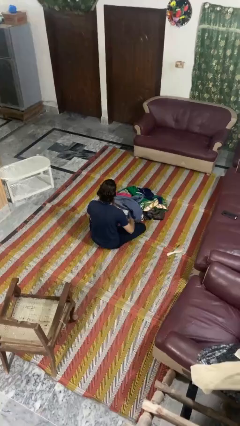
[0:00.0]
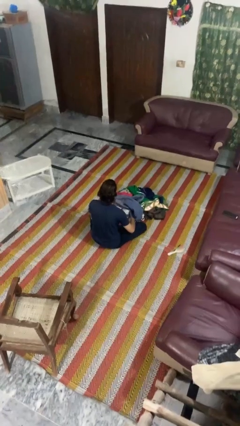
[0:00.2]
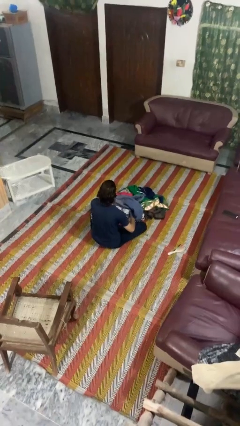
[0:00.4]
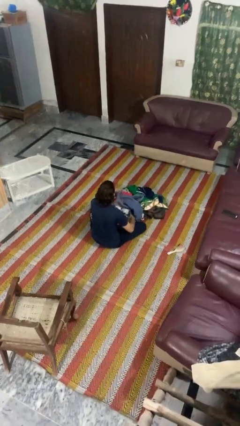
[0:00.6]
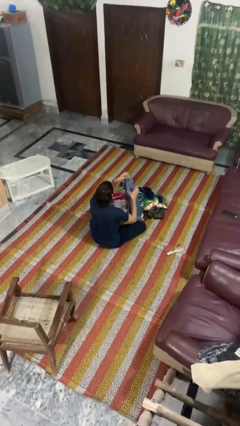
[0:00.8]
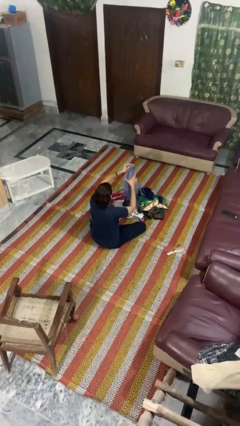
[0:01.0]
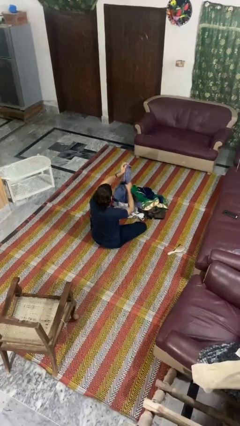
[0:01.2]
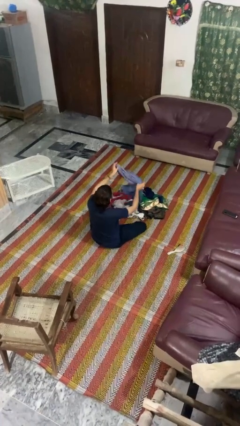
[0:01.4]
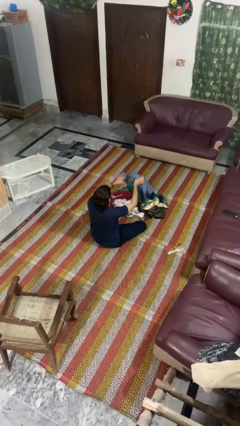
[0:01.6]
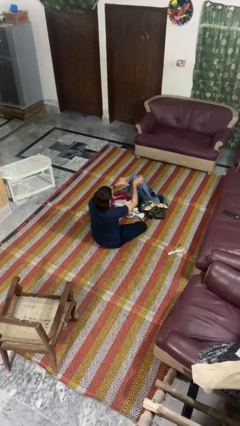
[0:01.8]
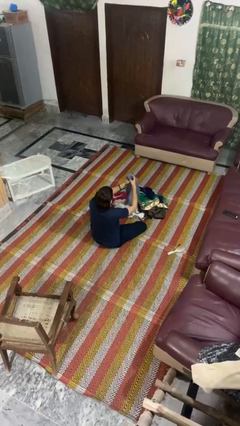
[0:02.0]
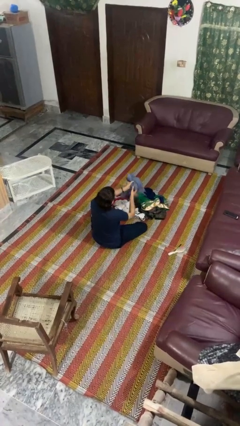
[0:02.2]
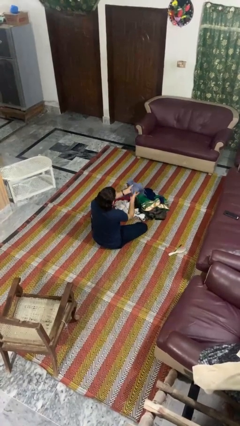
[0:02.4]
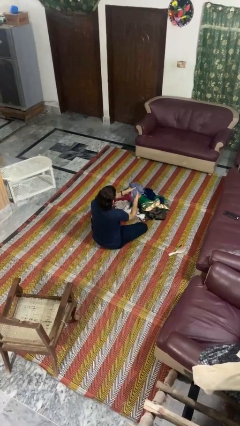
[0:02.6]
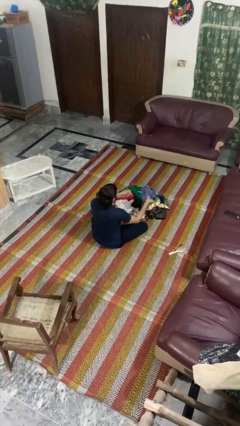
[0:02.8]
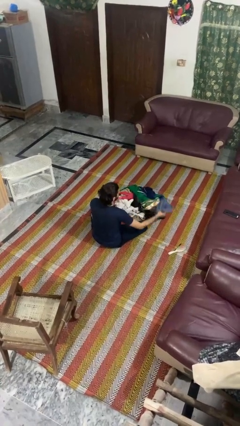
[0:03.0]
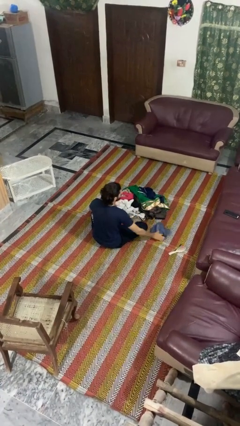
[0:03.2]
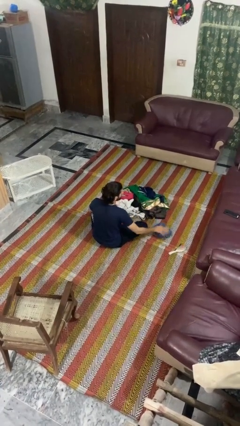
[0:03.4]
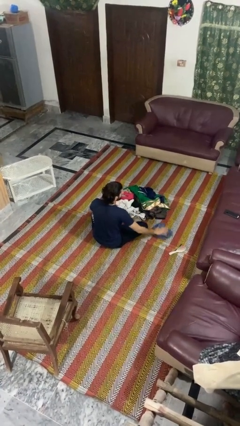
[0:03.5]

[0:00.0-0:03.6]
person folds pants

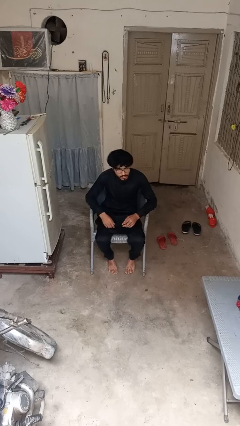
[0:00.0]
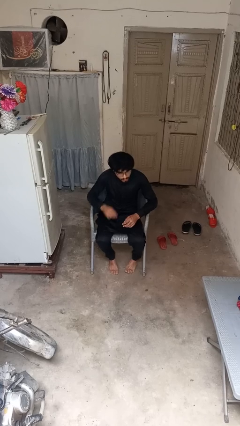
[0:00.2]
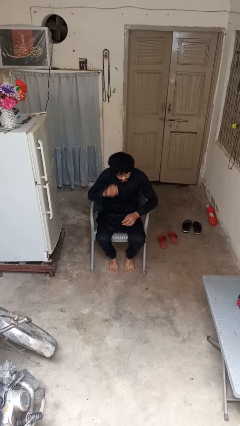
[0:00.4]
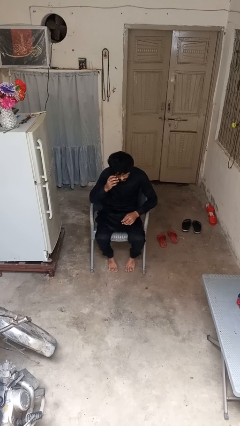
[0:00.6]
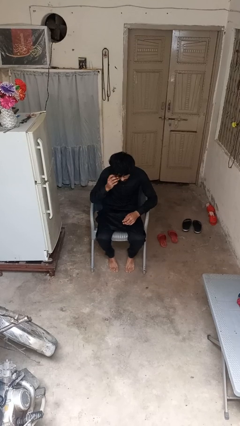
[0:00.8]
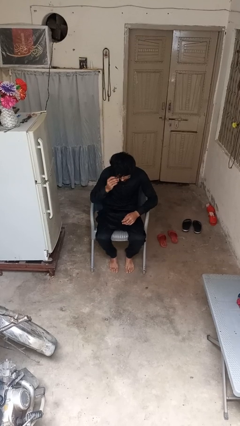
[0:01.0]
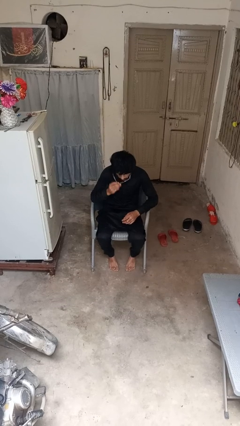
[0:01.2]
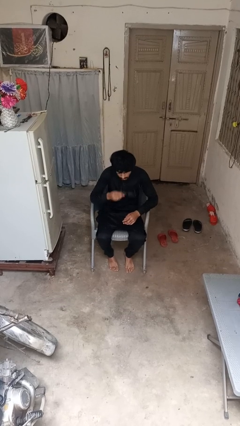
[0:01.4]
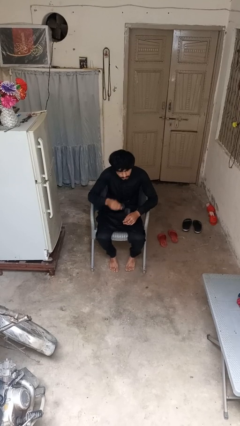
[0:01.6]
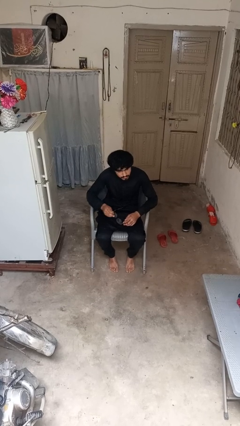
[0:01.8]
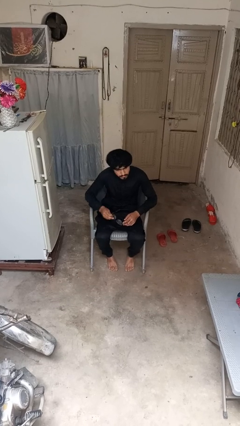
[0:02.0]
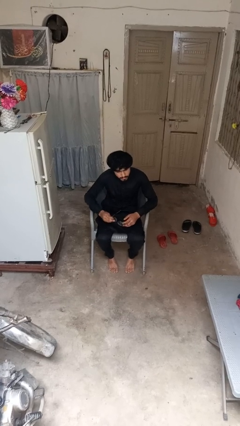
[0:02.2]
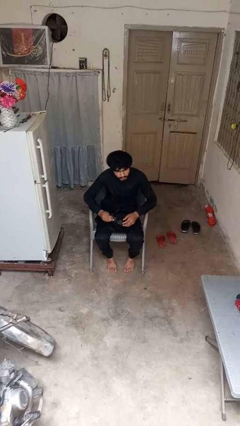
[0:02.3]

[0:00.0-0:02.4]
person takes off glasses

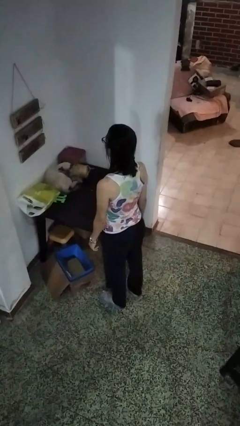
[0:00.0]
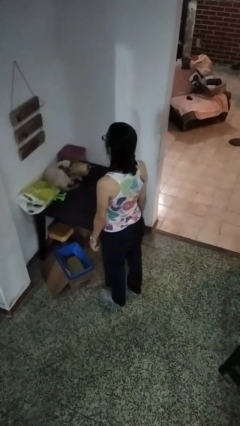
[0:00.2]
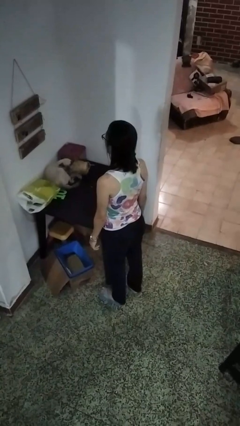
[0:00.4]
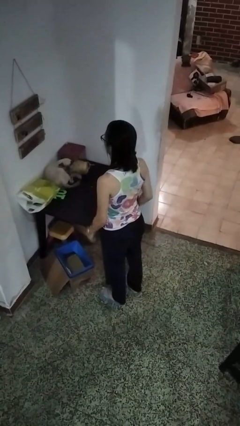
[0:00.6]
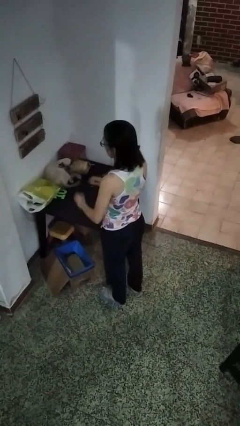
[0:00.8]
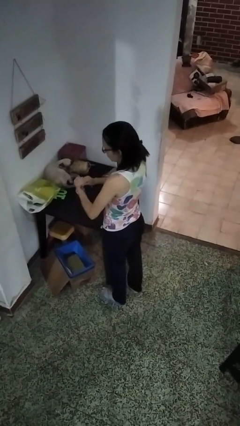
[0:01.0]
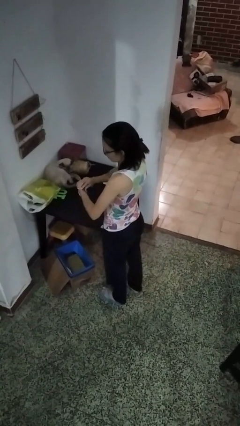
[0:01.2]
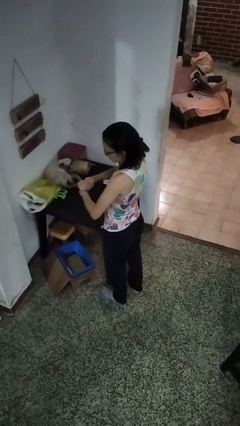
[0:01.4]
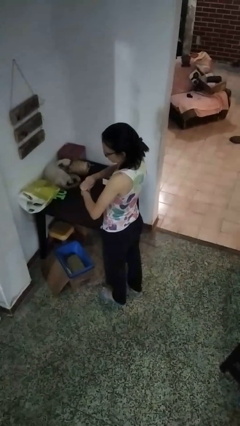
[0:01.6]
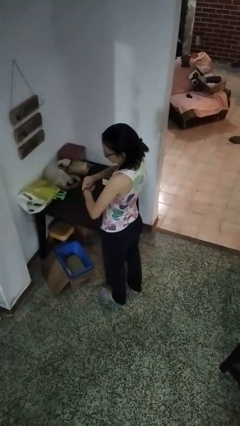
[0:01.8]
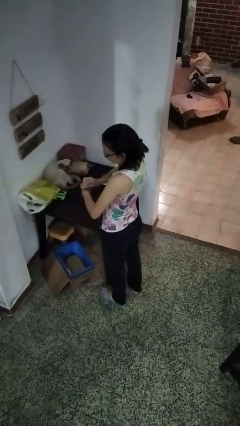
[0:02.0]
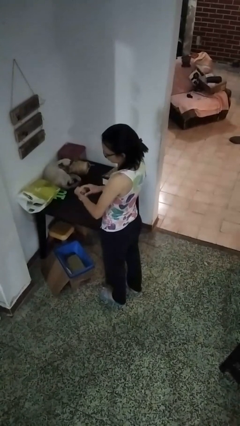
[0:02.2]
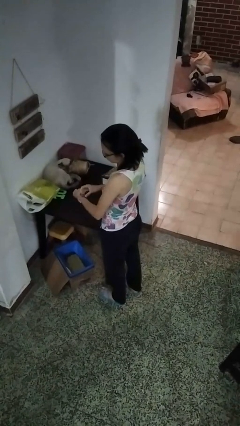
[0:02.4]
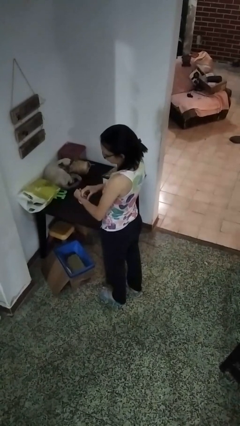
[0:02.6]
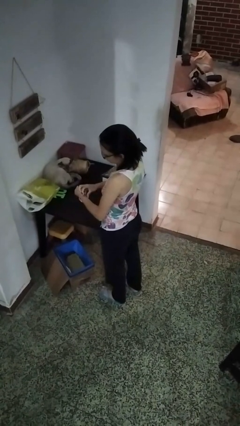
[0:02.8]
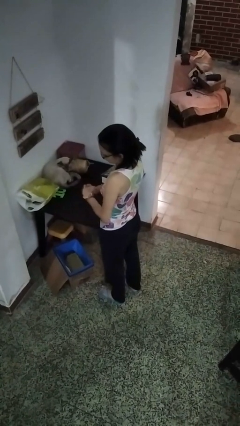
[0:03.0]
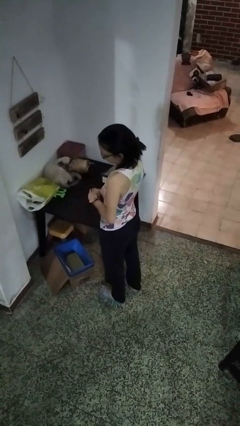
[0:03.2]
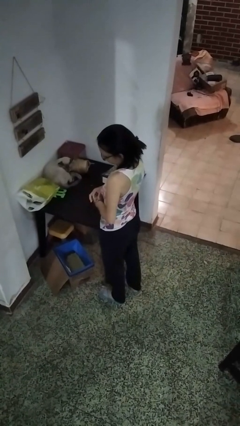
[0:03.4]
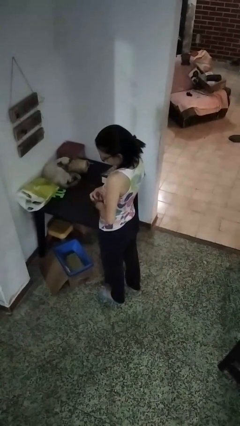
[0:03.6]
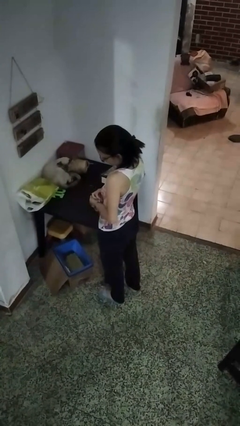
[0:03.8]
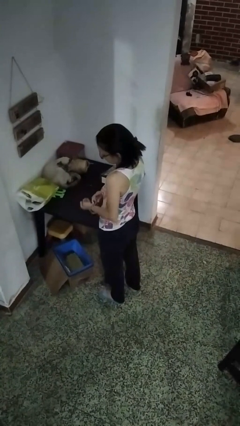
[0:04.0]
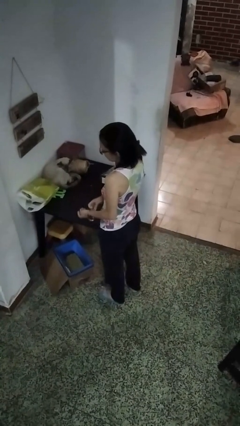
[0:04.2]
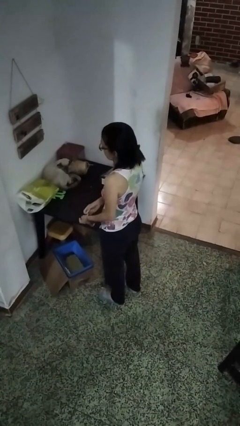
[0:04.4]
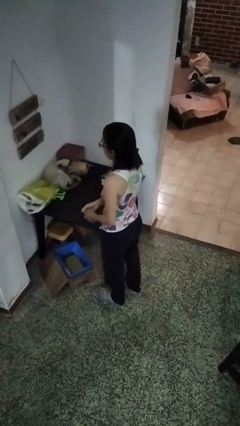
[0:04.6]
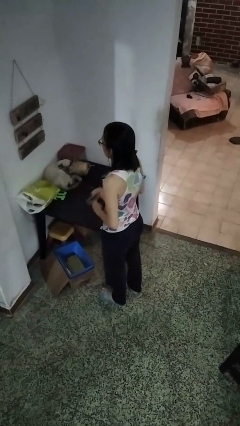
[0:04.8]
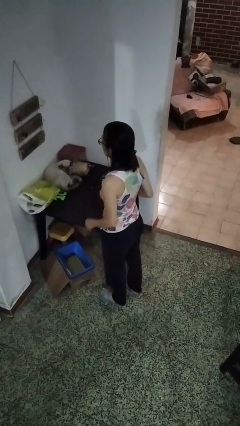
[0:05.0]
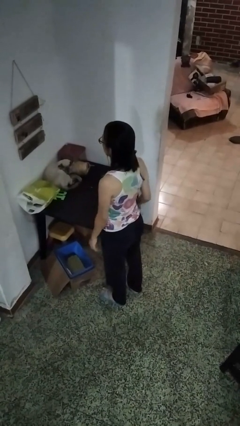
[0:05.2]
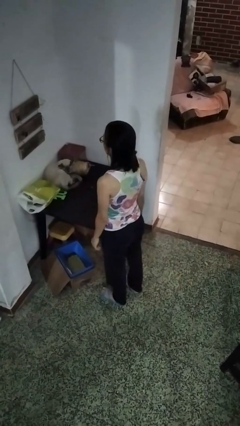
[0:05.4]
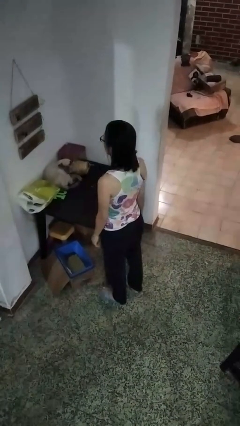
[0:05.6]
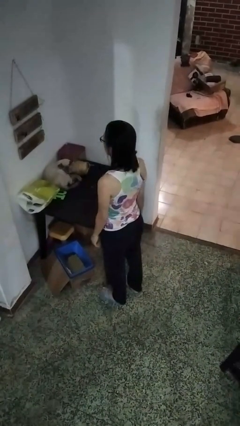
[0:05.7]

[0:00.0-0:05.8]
person takes off wristwatch

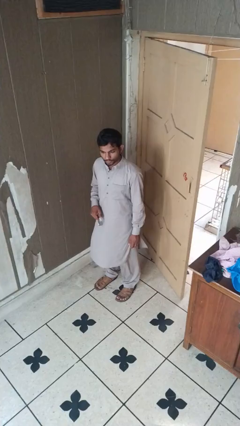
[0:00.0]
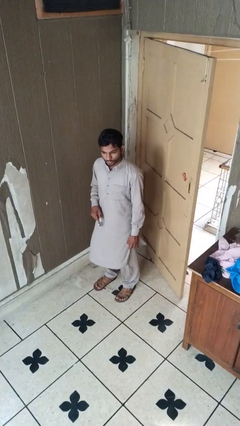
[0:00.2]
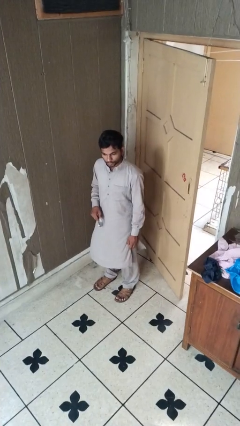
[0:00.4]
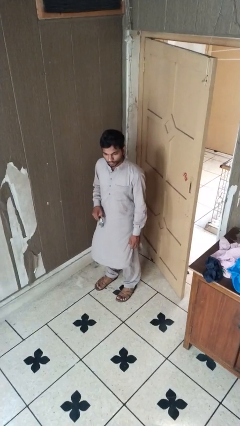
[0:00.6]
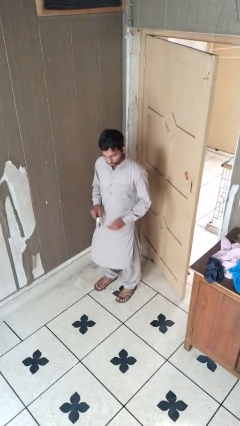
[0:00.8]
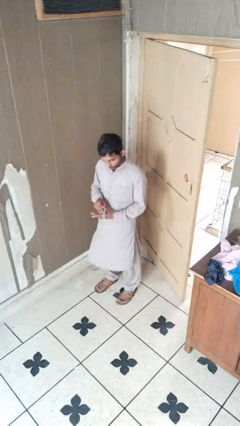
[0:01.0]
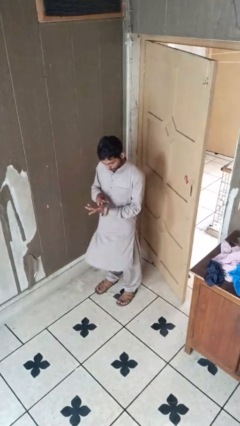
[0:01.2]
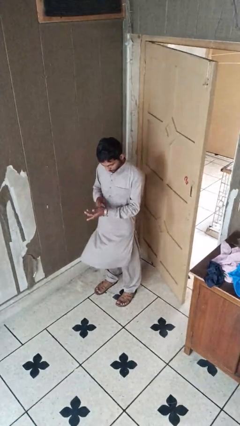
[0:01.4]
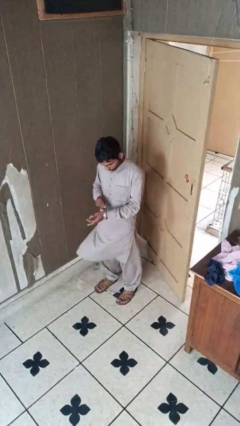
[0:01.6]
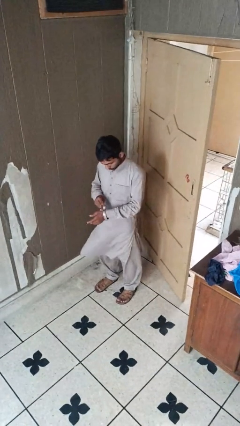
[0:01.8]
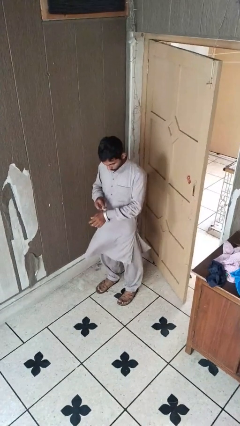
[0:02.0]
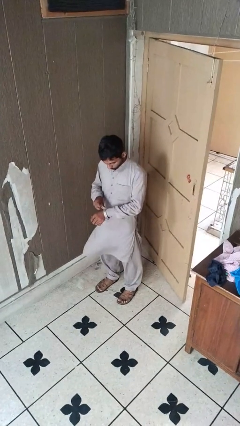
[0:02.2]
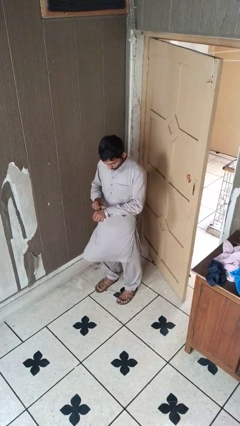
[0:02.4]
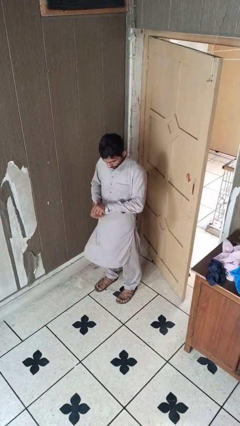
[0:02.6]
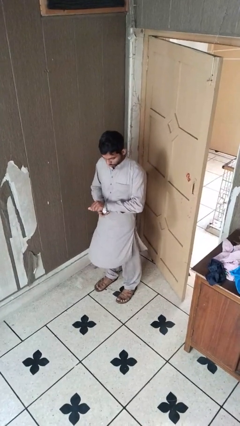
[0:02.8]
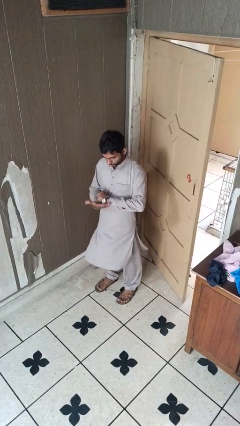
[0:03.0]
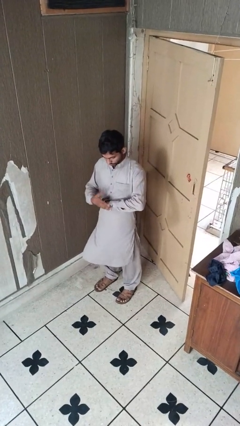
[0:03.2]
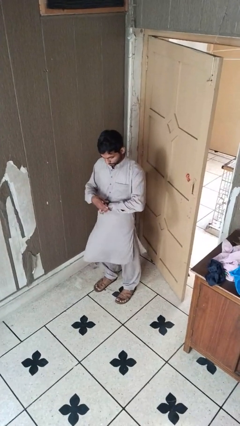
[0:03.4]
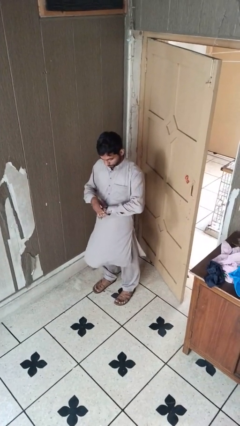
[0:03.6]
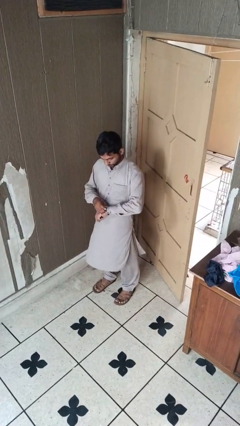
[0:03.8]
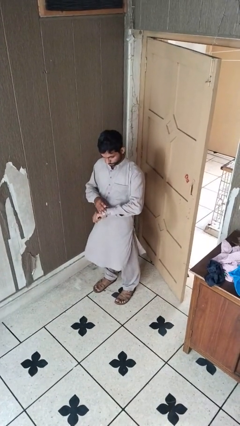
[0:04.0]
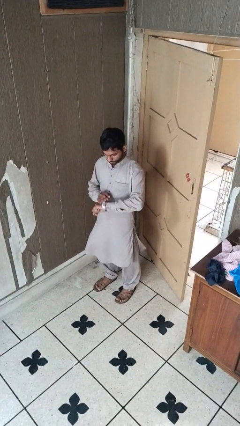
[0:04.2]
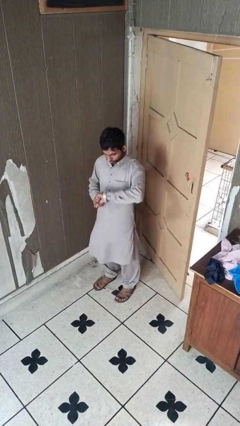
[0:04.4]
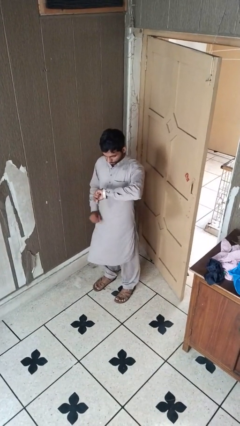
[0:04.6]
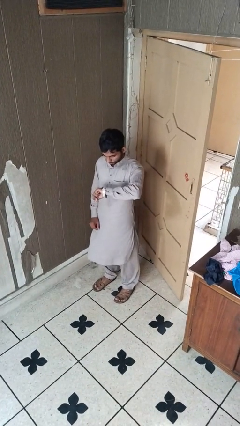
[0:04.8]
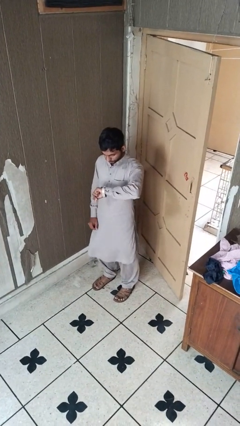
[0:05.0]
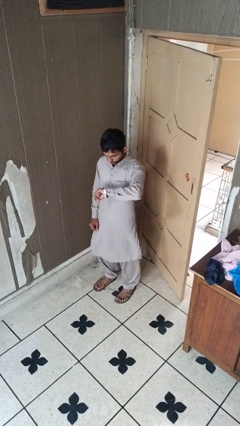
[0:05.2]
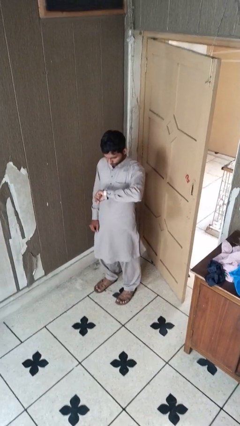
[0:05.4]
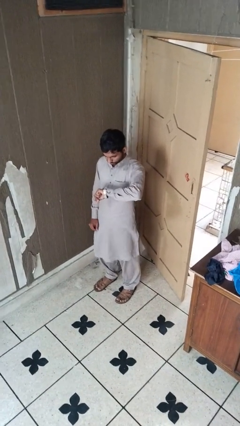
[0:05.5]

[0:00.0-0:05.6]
person puts on wristwatch

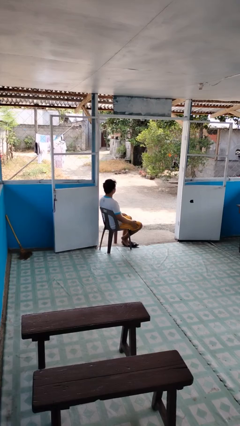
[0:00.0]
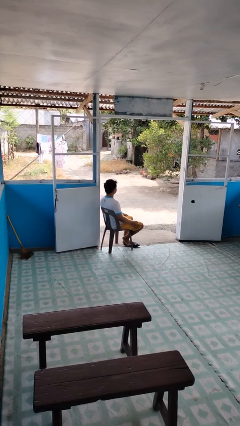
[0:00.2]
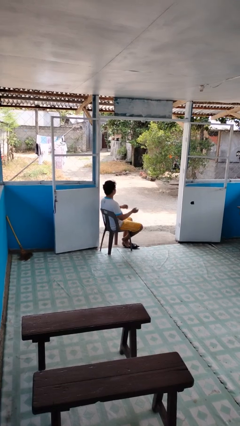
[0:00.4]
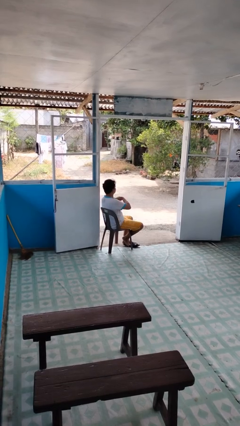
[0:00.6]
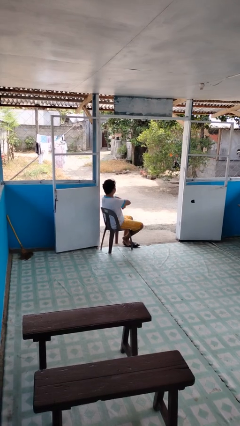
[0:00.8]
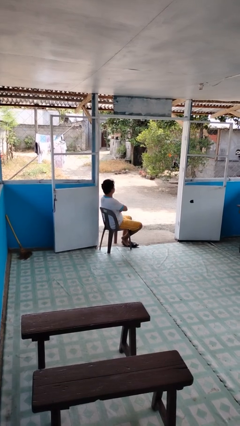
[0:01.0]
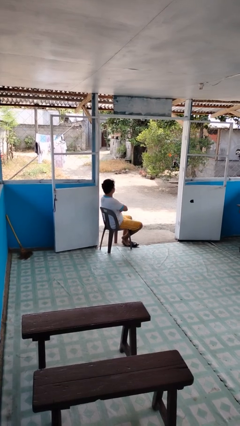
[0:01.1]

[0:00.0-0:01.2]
person crosses arms
